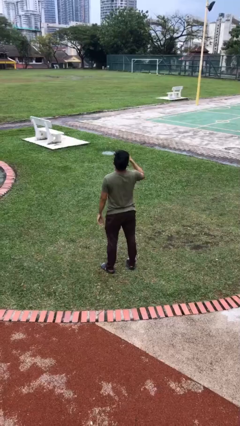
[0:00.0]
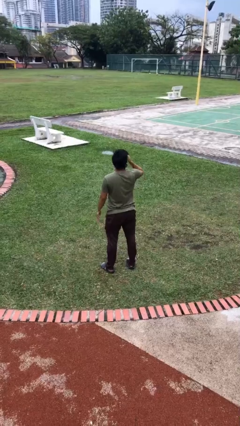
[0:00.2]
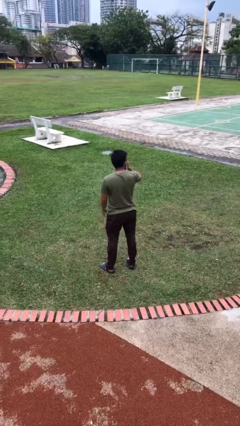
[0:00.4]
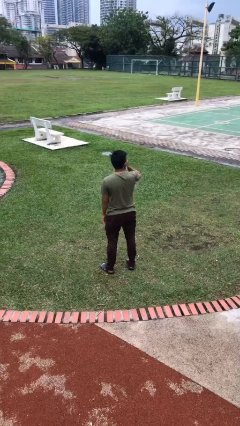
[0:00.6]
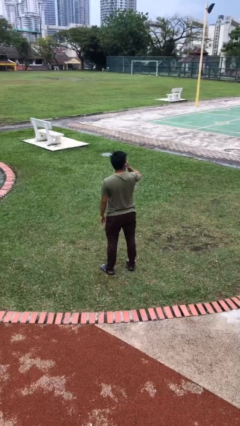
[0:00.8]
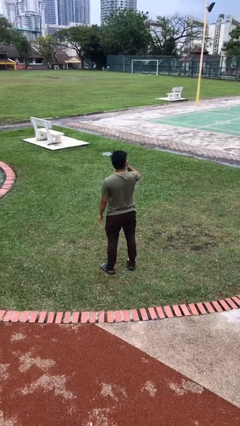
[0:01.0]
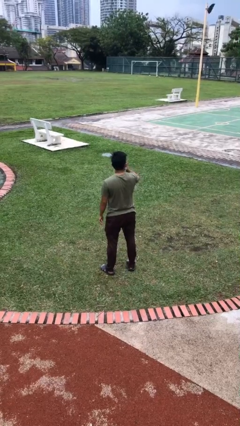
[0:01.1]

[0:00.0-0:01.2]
person sneezes into hand

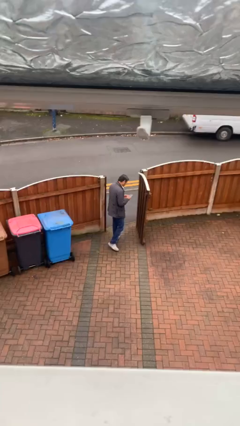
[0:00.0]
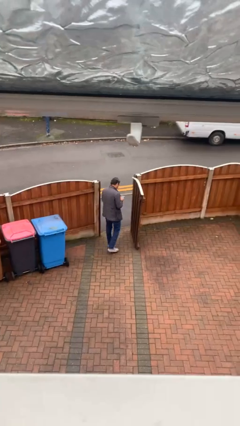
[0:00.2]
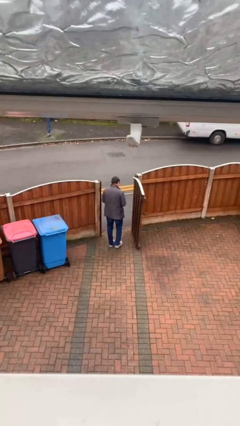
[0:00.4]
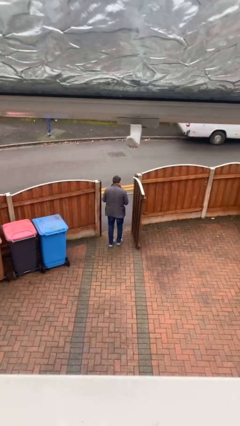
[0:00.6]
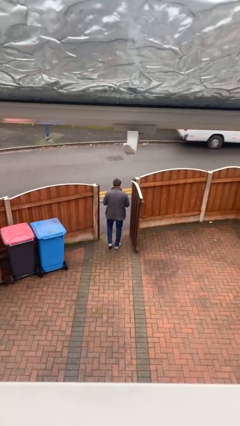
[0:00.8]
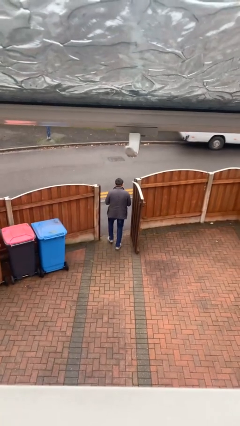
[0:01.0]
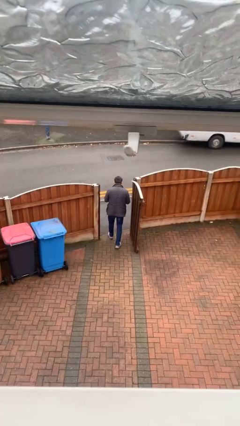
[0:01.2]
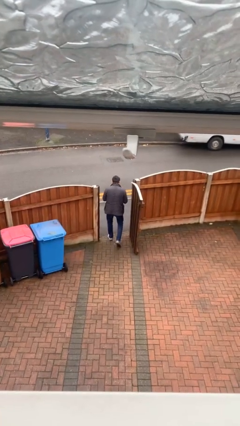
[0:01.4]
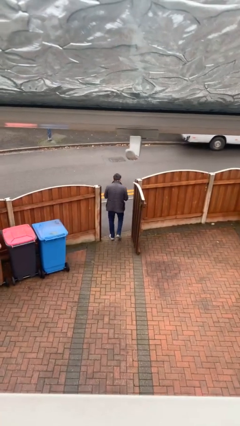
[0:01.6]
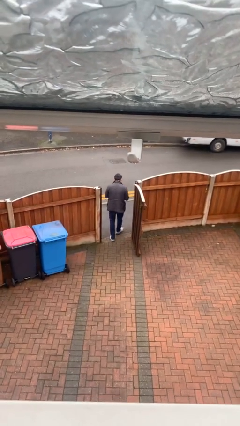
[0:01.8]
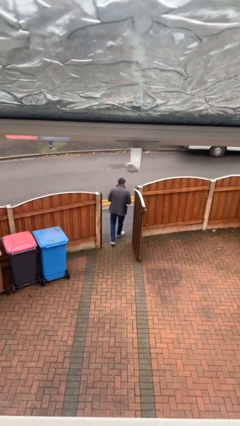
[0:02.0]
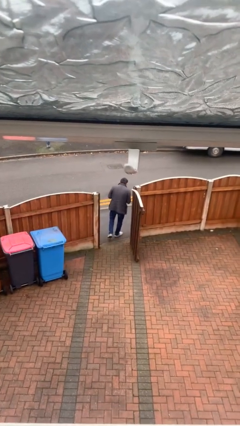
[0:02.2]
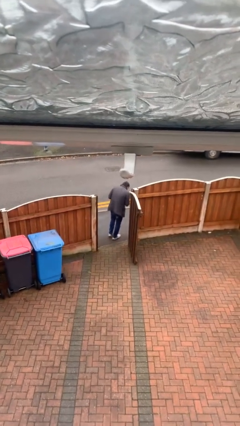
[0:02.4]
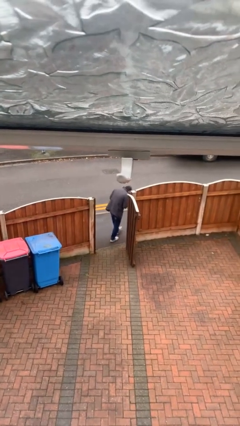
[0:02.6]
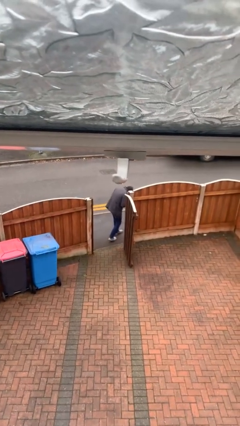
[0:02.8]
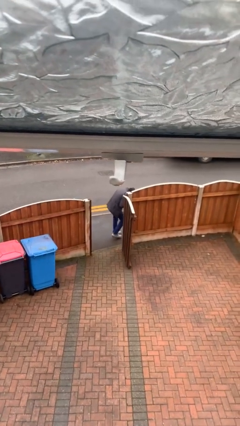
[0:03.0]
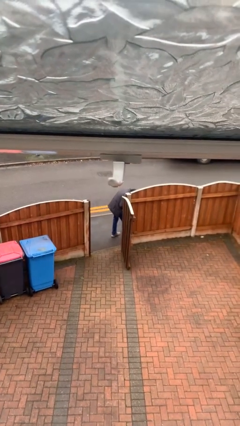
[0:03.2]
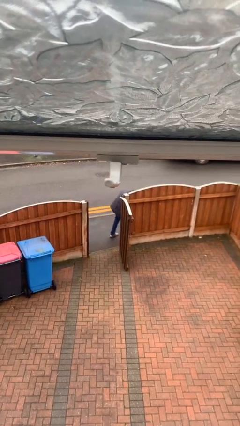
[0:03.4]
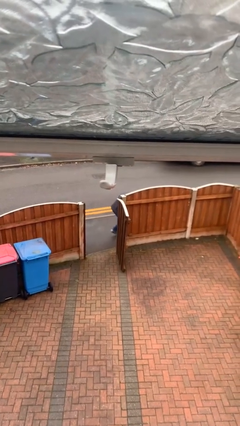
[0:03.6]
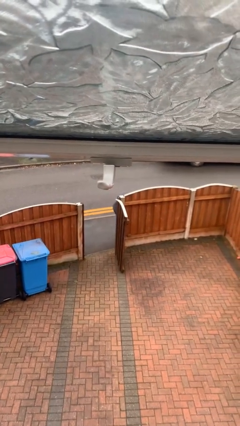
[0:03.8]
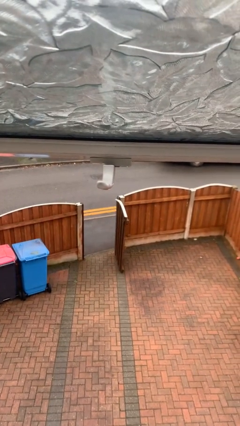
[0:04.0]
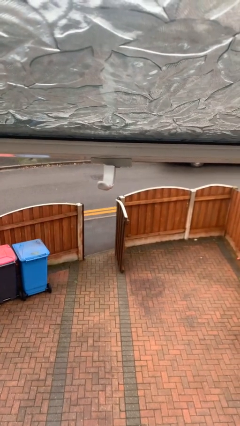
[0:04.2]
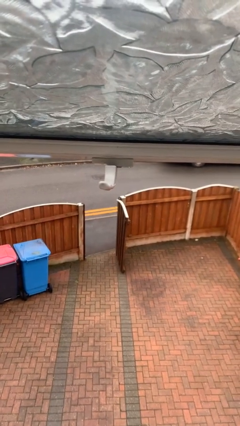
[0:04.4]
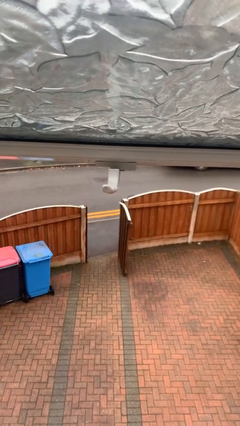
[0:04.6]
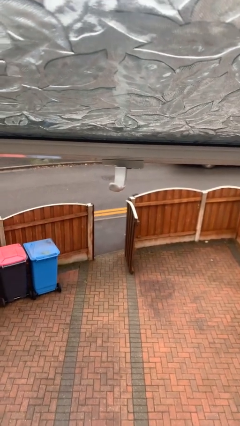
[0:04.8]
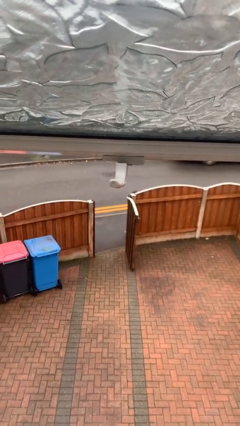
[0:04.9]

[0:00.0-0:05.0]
person exits scene through structure

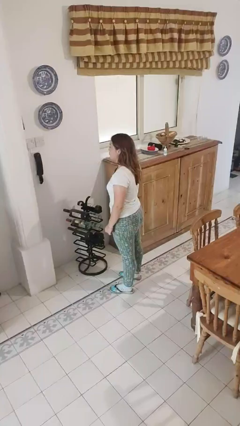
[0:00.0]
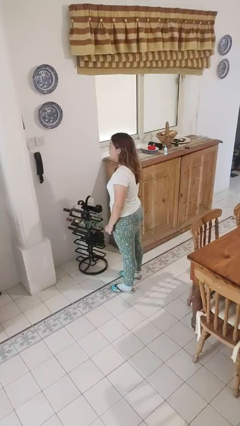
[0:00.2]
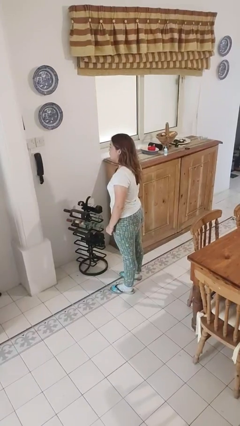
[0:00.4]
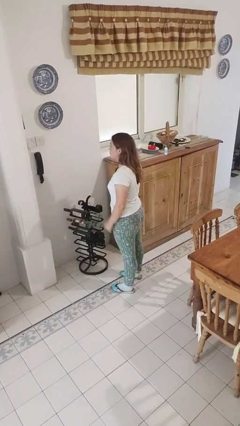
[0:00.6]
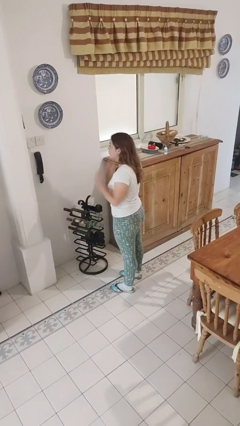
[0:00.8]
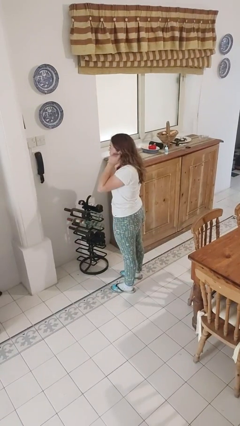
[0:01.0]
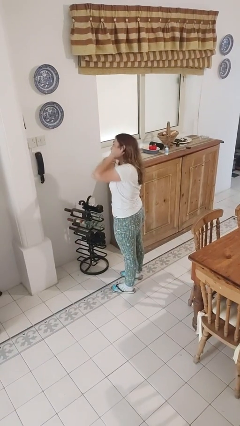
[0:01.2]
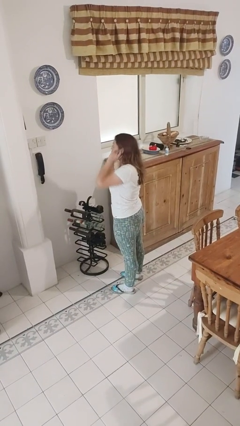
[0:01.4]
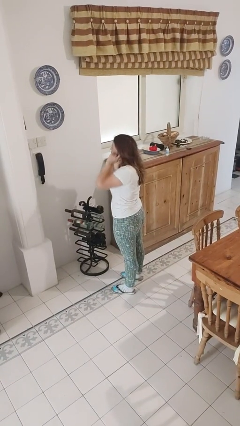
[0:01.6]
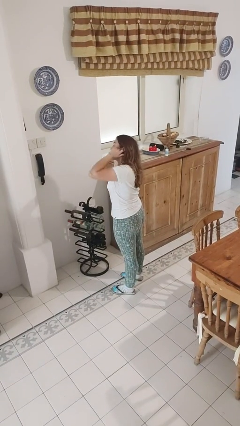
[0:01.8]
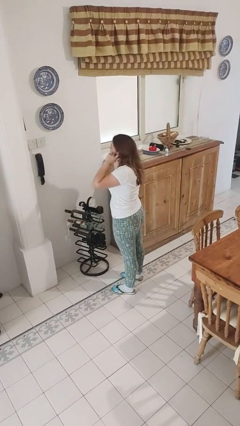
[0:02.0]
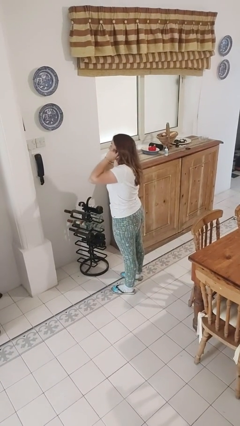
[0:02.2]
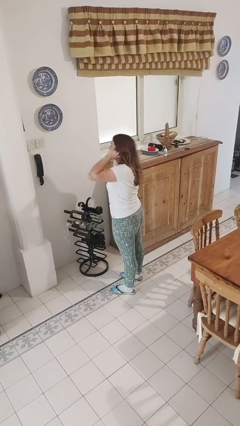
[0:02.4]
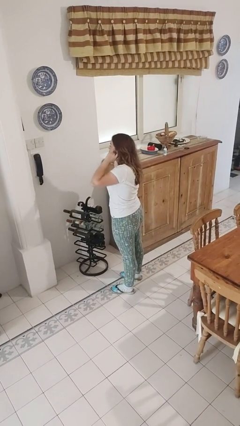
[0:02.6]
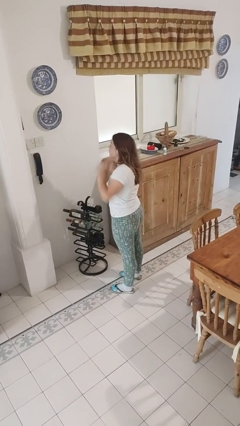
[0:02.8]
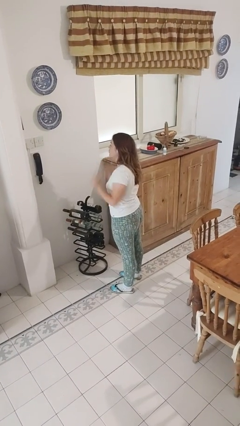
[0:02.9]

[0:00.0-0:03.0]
person puts fingers in ear

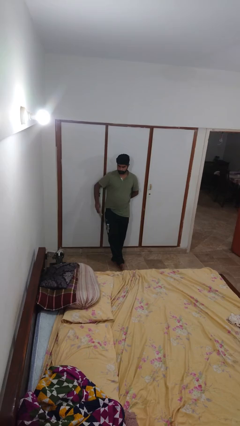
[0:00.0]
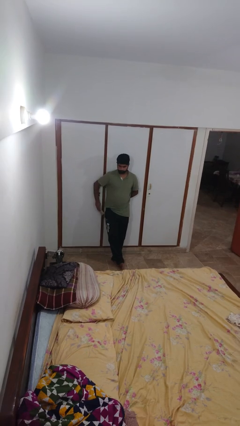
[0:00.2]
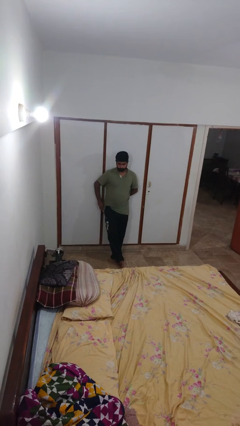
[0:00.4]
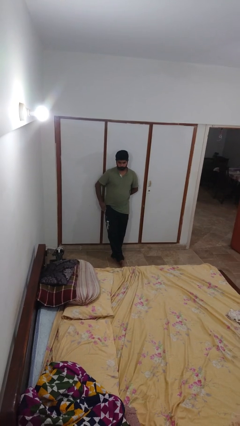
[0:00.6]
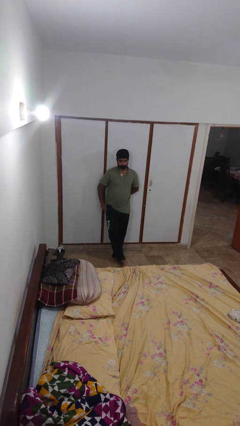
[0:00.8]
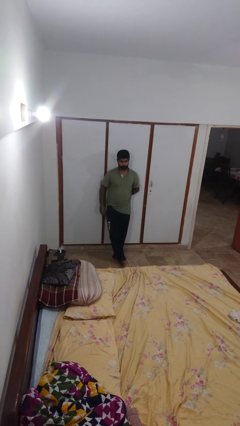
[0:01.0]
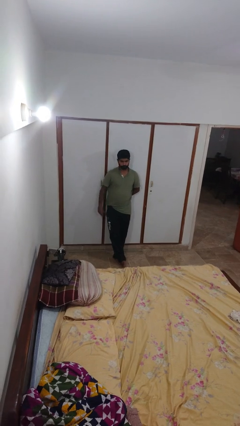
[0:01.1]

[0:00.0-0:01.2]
person puts phone into pocket

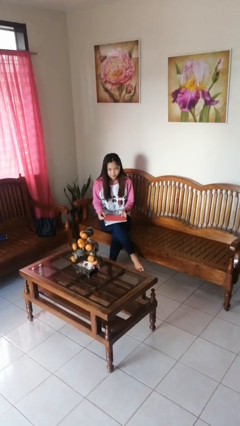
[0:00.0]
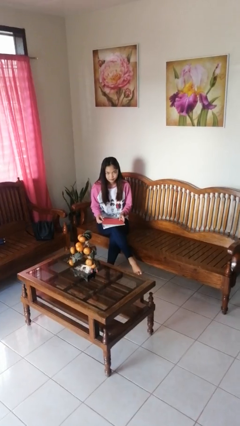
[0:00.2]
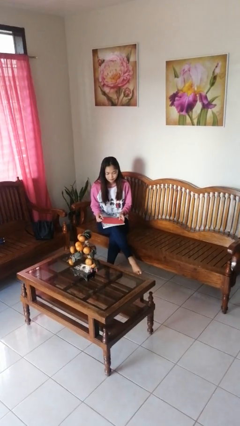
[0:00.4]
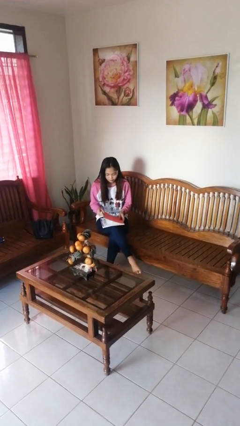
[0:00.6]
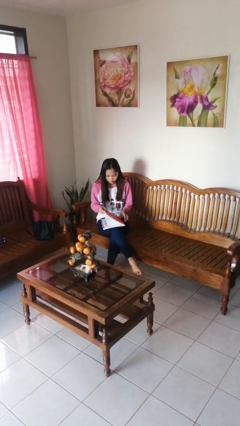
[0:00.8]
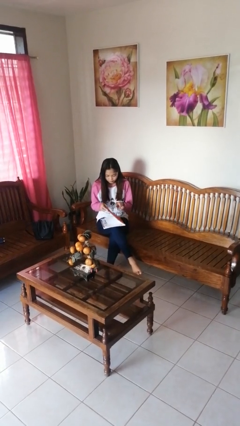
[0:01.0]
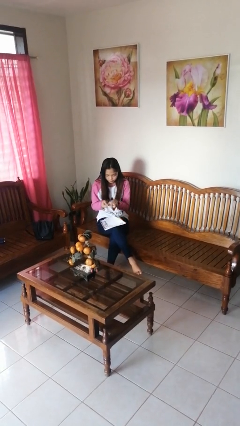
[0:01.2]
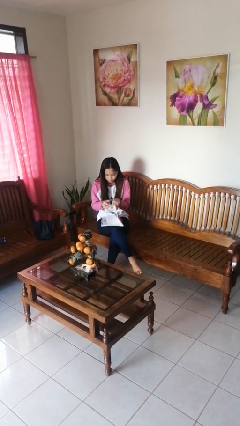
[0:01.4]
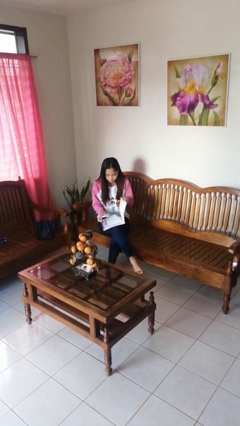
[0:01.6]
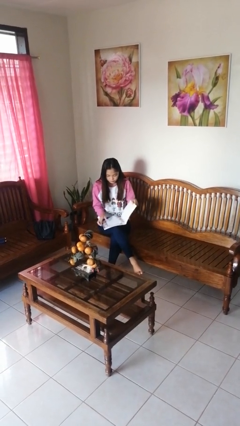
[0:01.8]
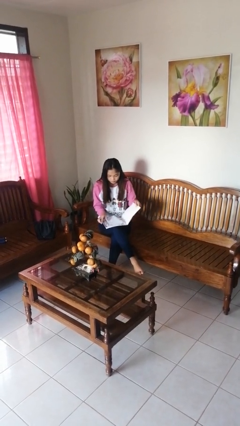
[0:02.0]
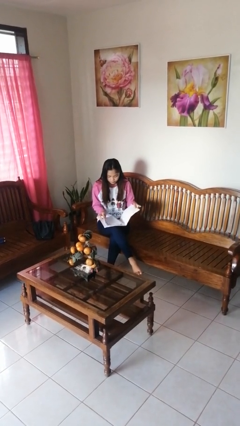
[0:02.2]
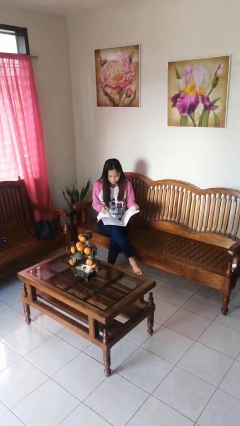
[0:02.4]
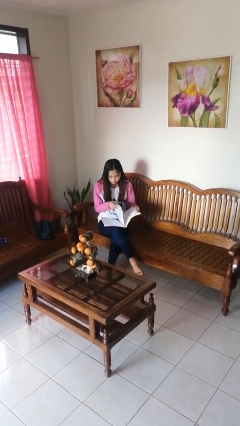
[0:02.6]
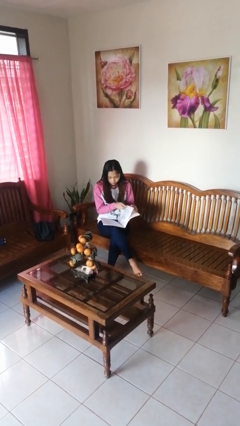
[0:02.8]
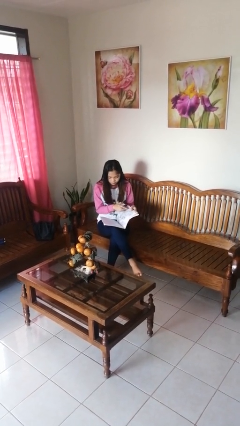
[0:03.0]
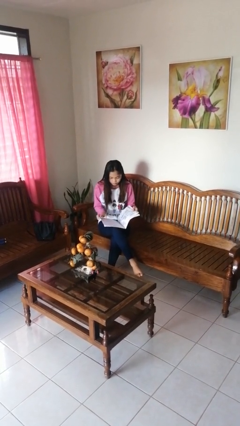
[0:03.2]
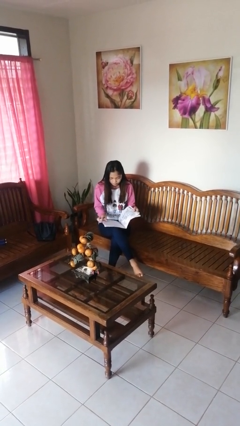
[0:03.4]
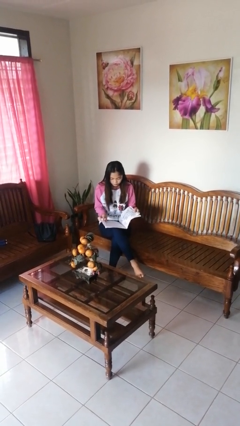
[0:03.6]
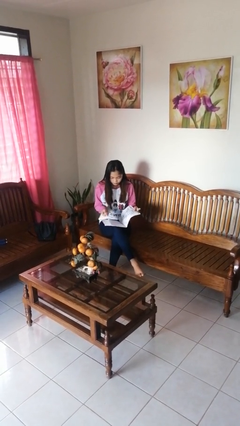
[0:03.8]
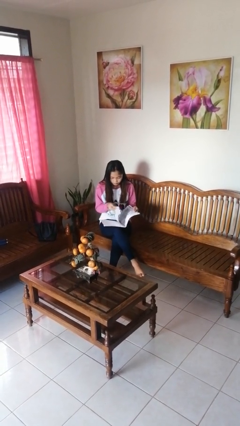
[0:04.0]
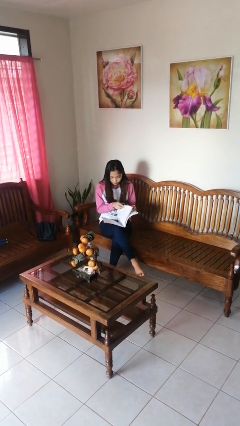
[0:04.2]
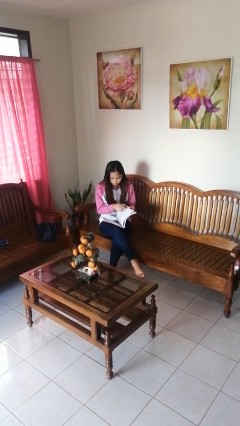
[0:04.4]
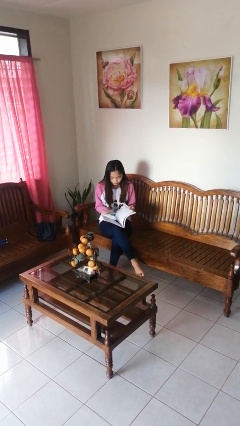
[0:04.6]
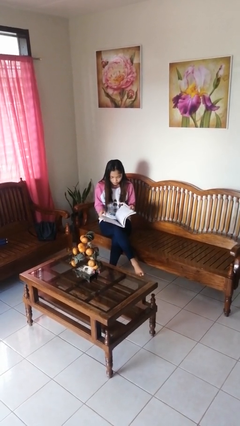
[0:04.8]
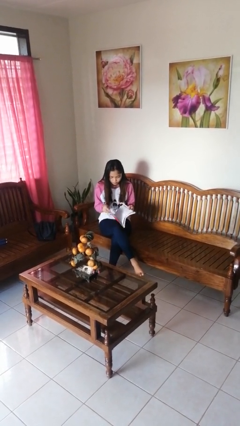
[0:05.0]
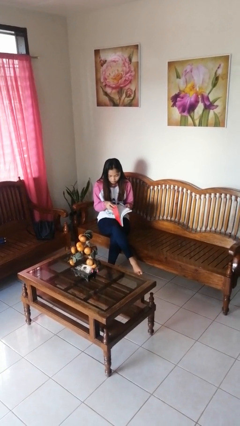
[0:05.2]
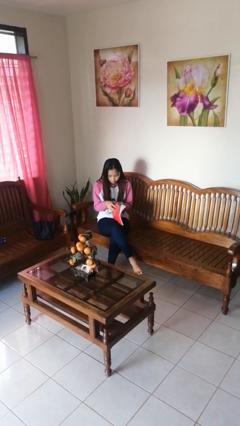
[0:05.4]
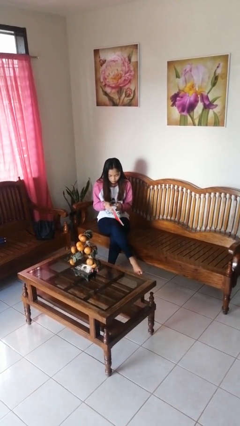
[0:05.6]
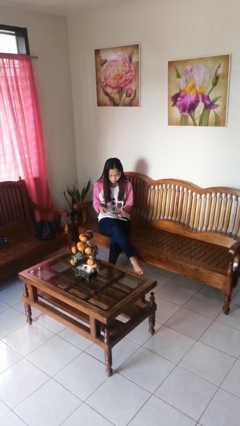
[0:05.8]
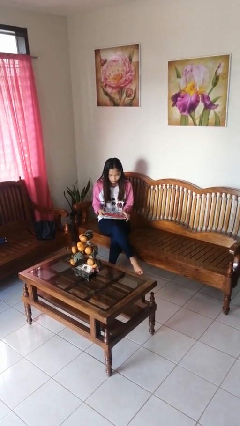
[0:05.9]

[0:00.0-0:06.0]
person reads magazine

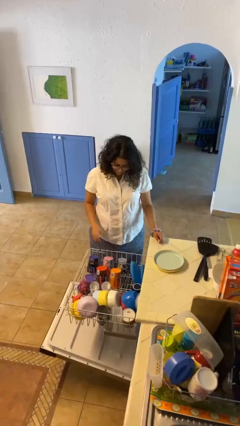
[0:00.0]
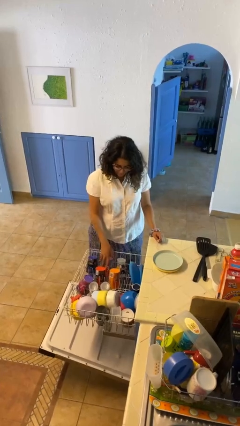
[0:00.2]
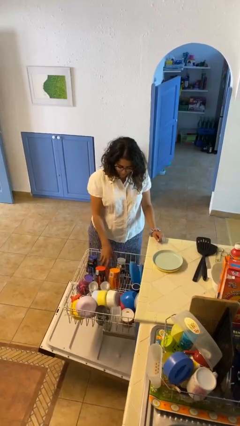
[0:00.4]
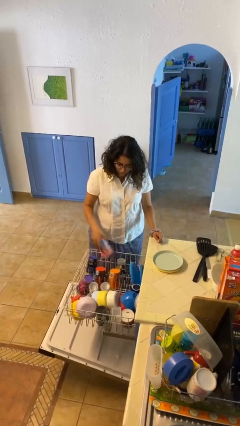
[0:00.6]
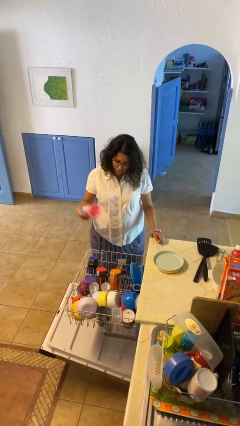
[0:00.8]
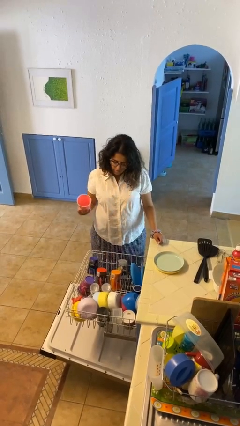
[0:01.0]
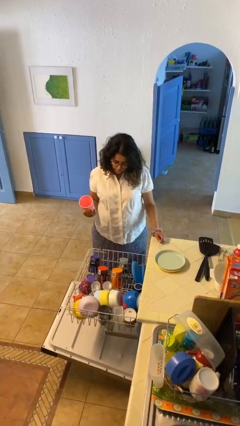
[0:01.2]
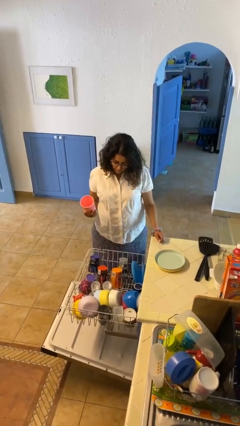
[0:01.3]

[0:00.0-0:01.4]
person unloads dishwasher
